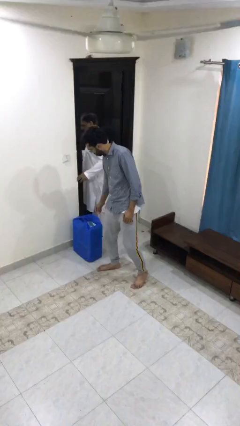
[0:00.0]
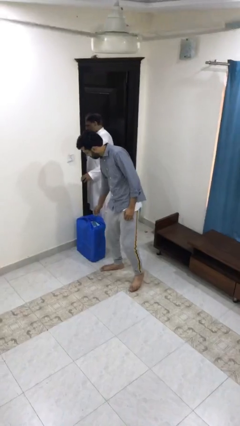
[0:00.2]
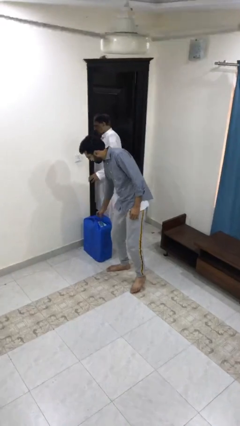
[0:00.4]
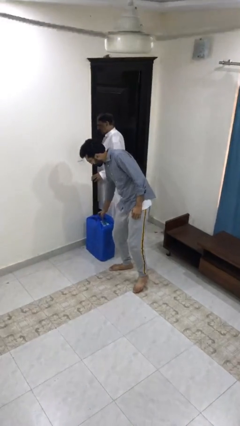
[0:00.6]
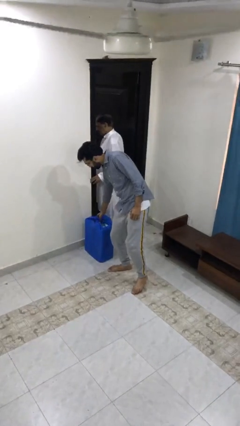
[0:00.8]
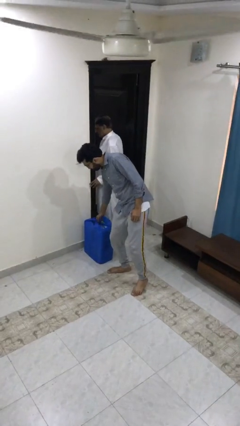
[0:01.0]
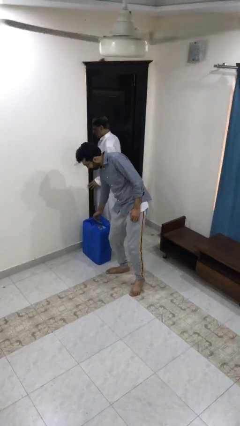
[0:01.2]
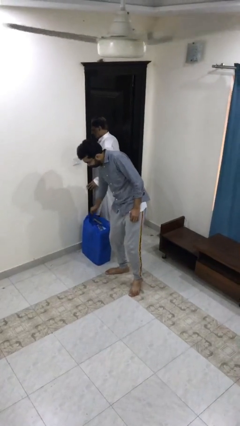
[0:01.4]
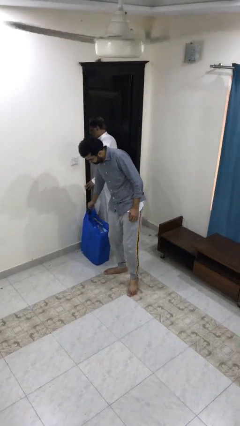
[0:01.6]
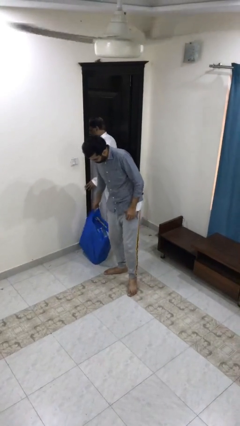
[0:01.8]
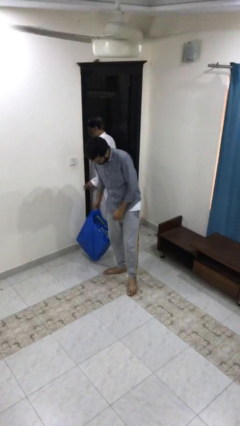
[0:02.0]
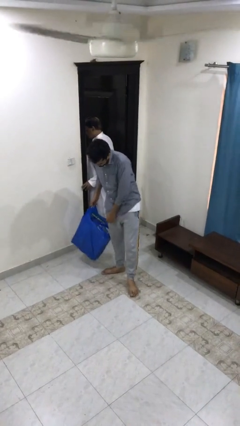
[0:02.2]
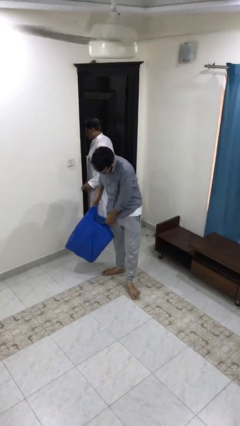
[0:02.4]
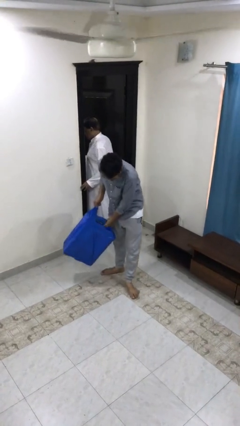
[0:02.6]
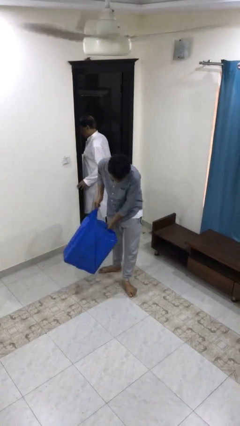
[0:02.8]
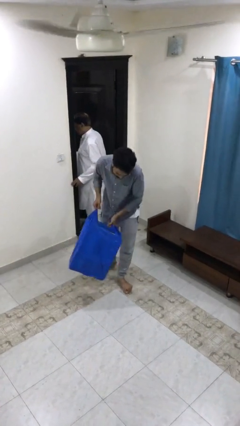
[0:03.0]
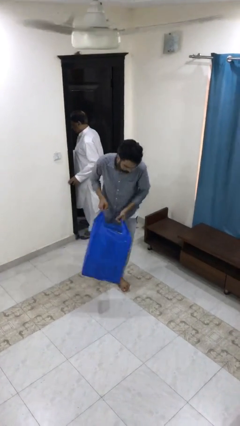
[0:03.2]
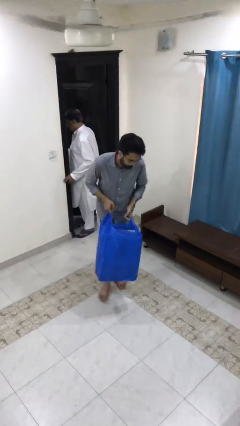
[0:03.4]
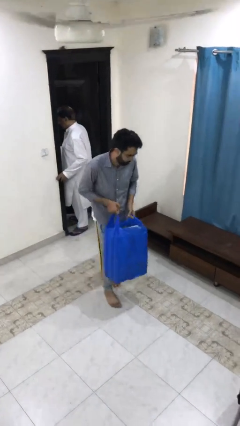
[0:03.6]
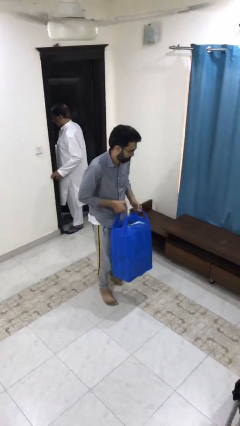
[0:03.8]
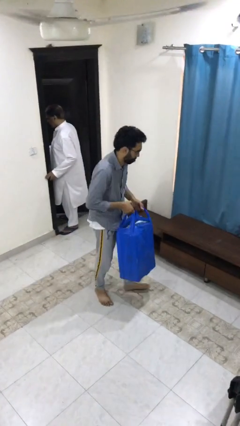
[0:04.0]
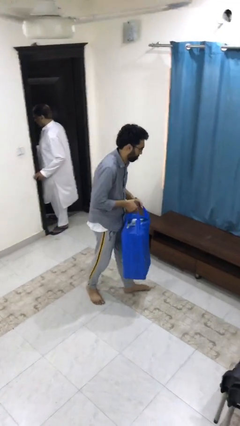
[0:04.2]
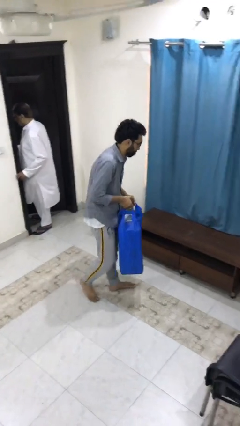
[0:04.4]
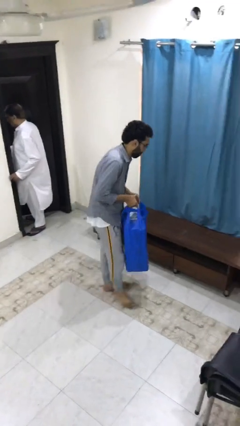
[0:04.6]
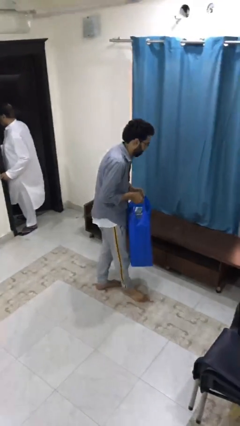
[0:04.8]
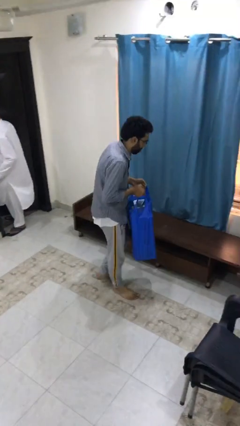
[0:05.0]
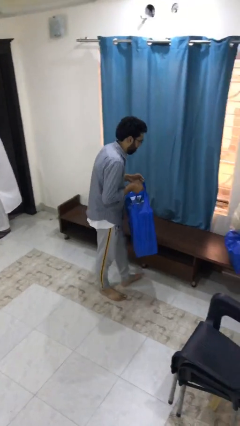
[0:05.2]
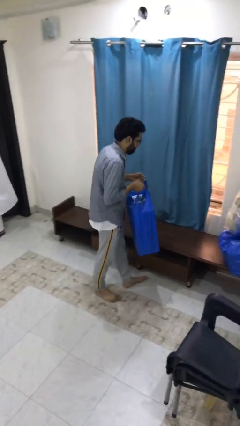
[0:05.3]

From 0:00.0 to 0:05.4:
person steals object from person

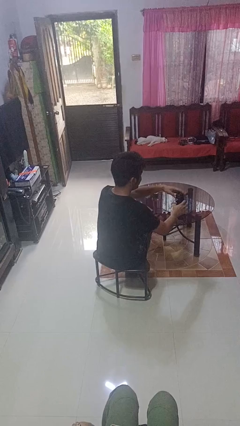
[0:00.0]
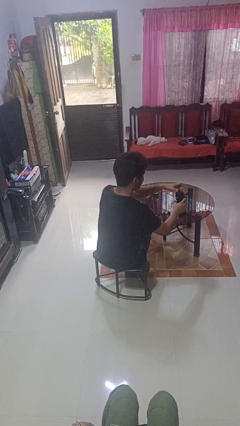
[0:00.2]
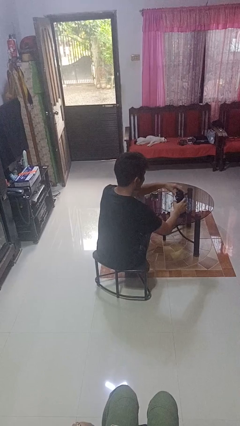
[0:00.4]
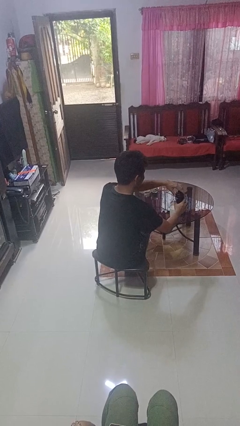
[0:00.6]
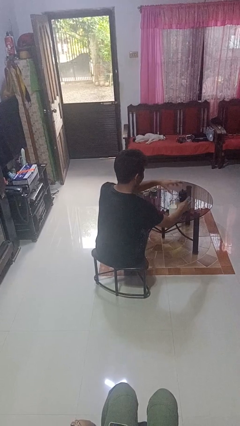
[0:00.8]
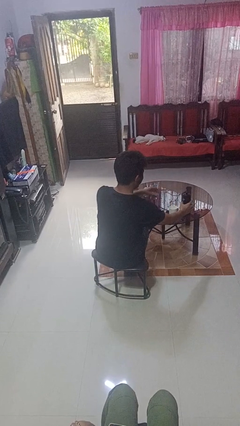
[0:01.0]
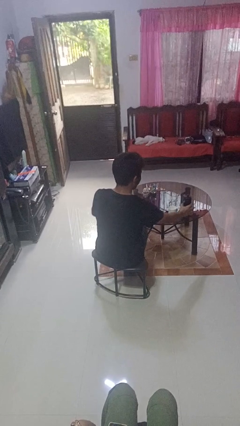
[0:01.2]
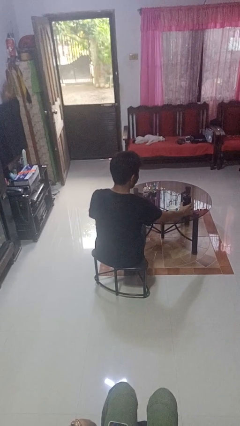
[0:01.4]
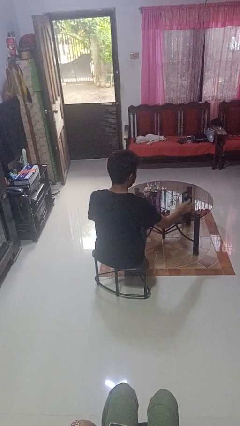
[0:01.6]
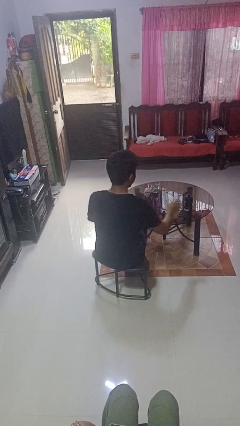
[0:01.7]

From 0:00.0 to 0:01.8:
person screws lid to bottle

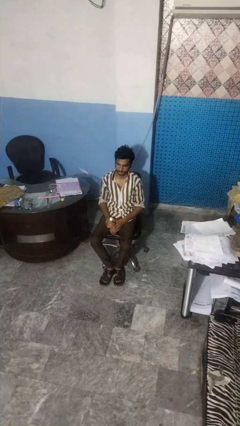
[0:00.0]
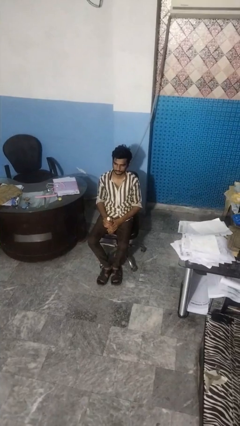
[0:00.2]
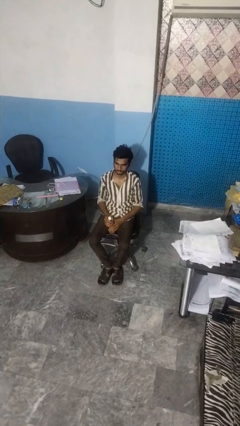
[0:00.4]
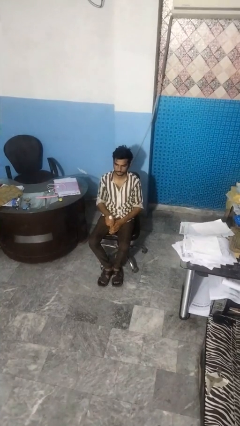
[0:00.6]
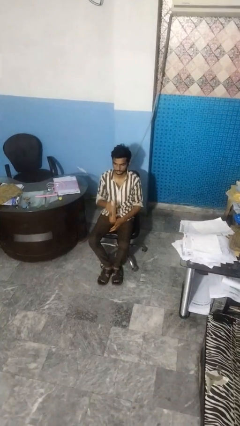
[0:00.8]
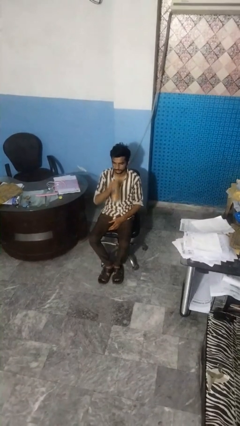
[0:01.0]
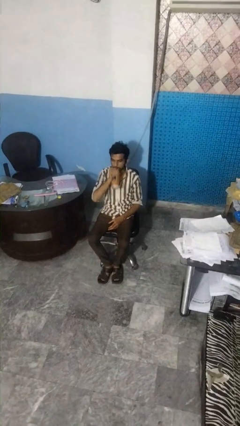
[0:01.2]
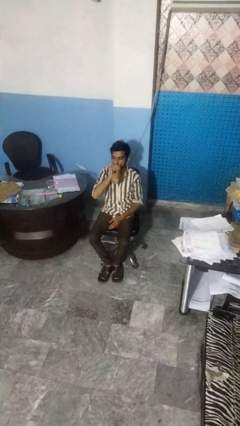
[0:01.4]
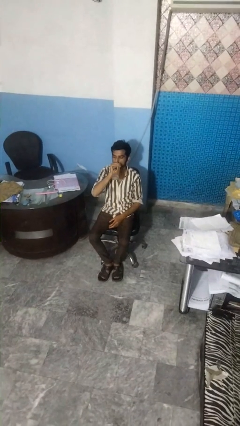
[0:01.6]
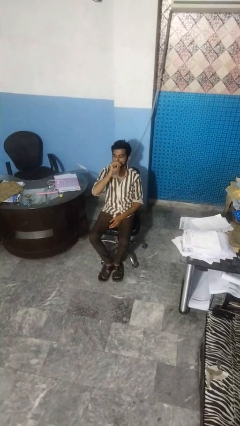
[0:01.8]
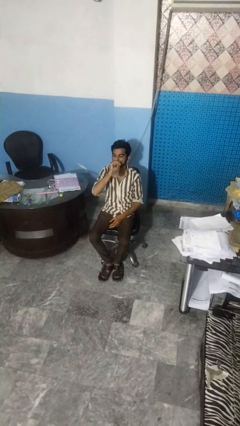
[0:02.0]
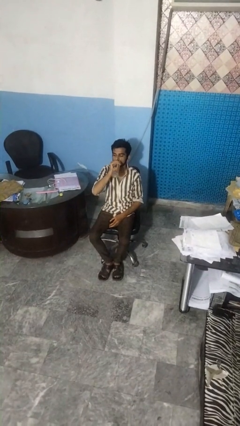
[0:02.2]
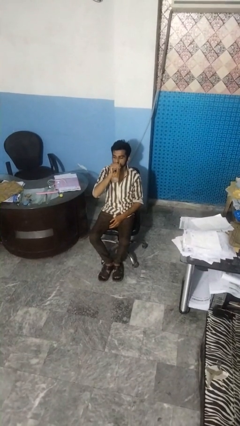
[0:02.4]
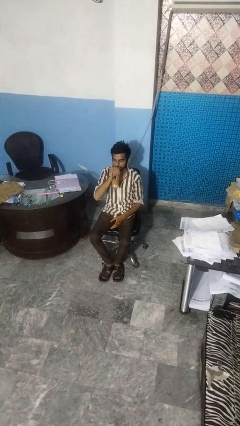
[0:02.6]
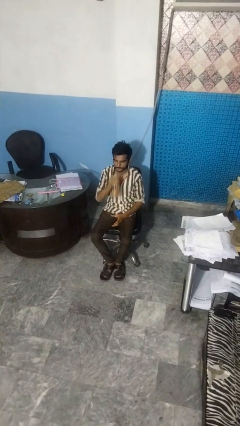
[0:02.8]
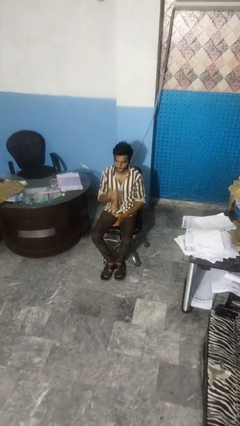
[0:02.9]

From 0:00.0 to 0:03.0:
person drinks from bottle

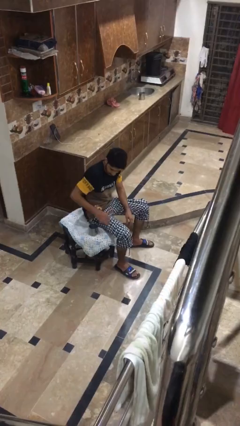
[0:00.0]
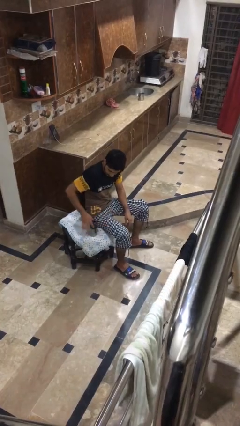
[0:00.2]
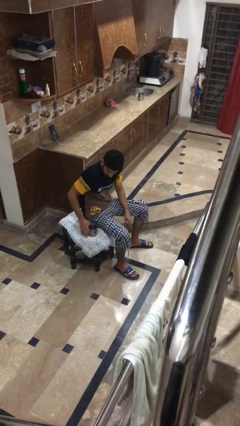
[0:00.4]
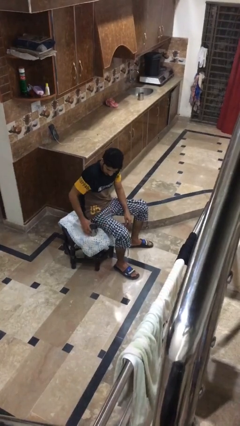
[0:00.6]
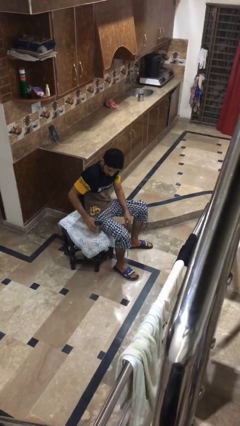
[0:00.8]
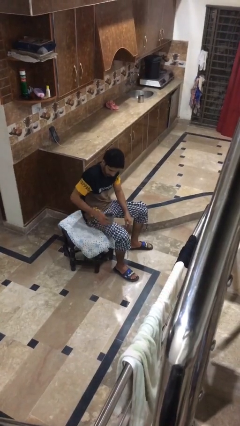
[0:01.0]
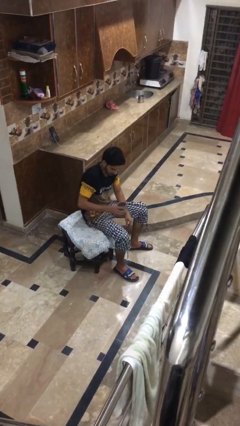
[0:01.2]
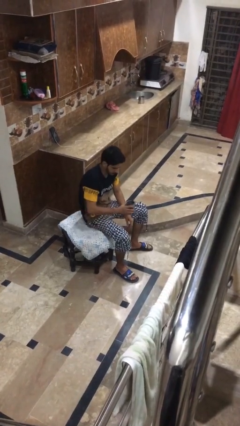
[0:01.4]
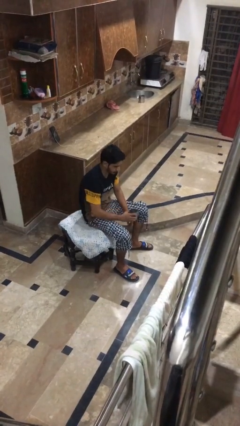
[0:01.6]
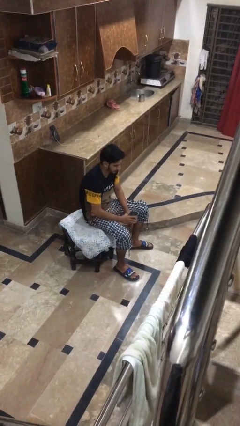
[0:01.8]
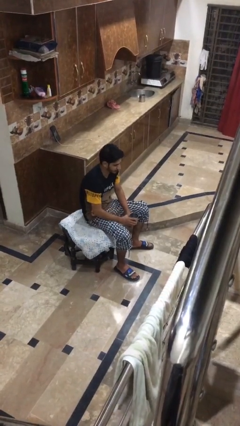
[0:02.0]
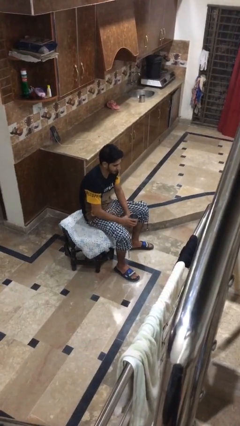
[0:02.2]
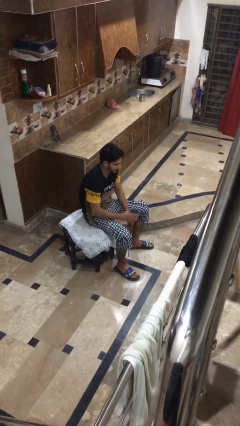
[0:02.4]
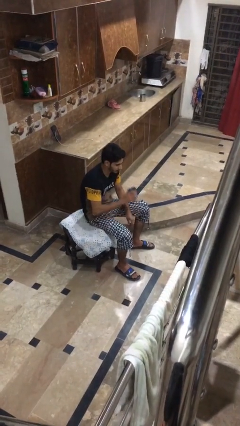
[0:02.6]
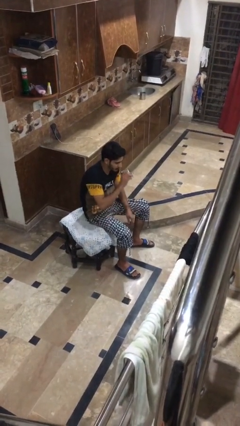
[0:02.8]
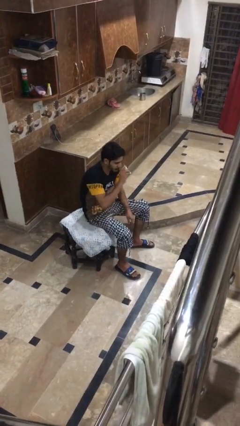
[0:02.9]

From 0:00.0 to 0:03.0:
person picks up object from table

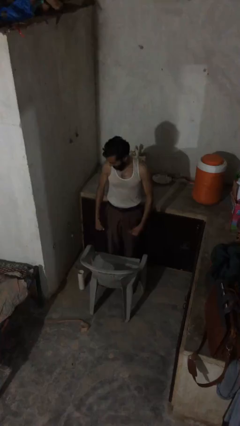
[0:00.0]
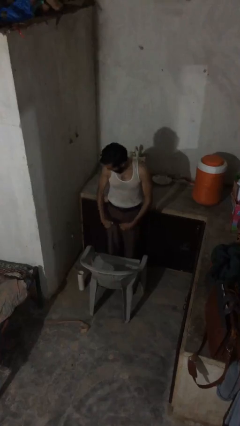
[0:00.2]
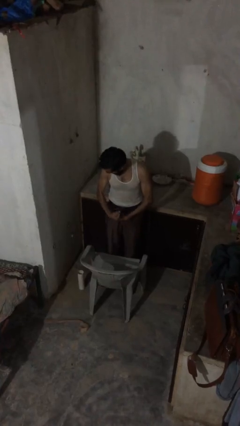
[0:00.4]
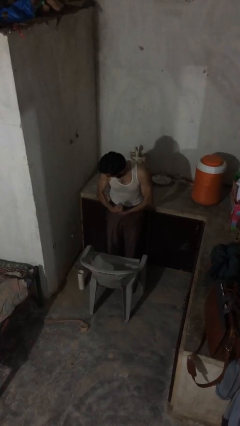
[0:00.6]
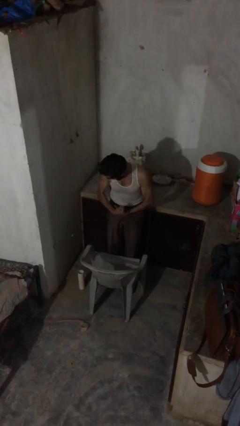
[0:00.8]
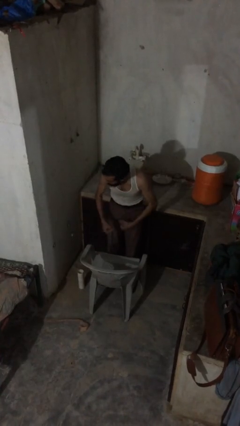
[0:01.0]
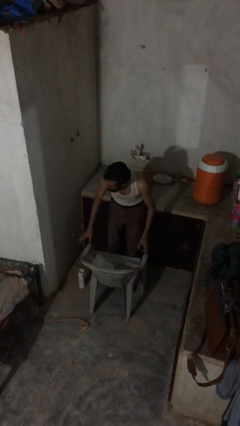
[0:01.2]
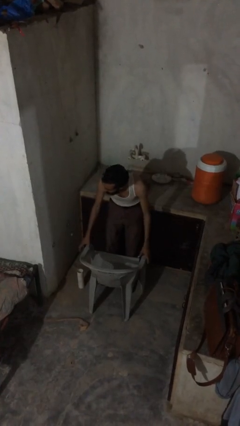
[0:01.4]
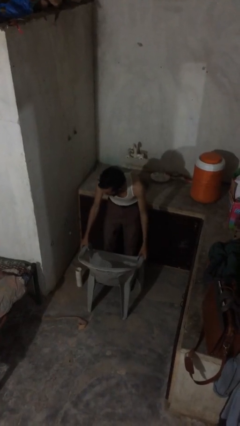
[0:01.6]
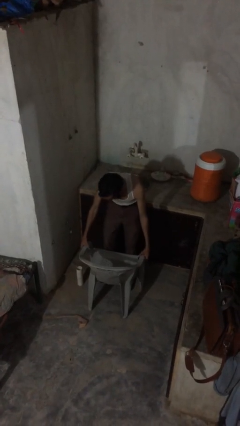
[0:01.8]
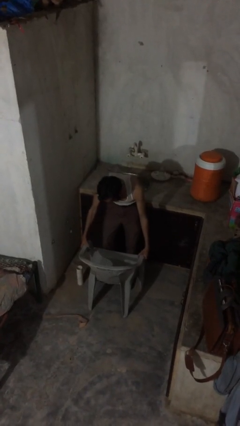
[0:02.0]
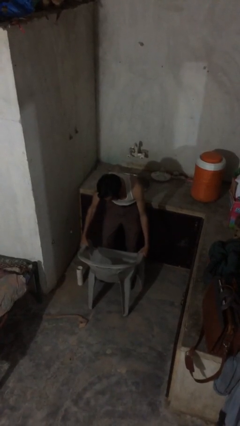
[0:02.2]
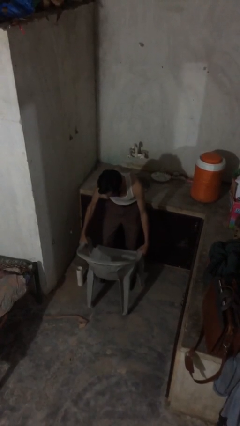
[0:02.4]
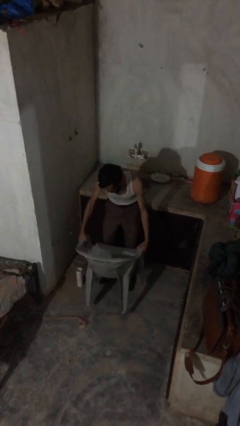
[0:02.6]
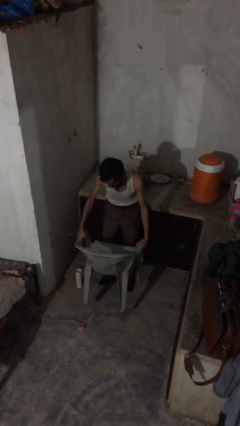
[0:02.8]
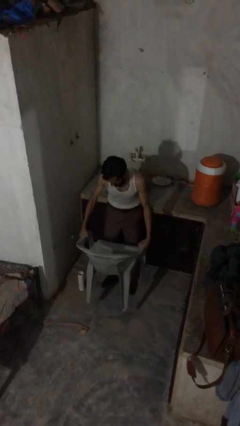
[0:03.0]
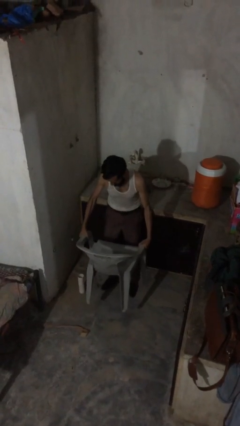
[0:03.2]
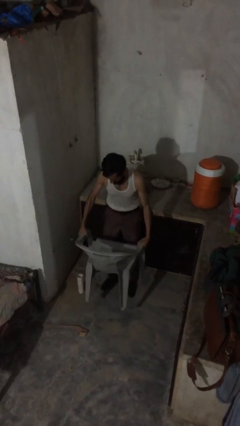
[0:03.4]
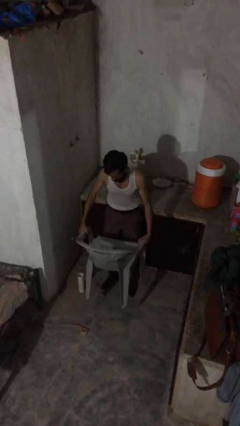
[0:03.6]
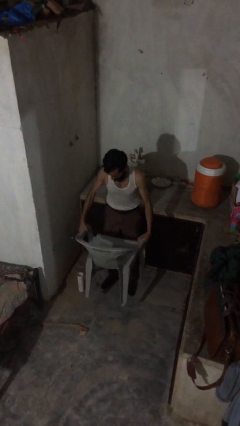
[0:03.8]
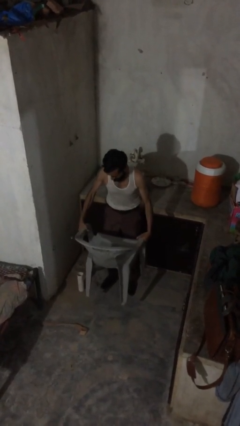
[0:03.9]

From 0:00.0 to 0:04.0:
person picks up object from floor

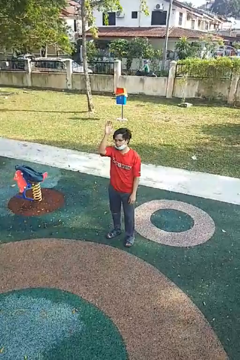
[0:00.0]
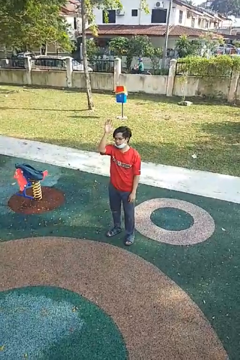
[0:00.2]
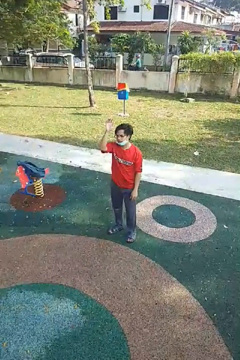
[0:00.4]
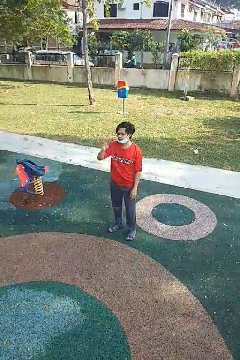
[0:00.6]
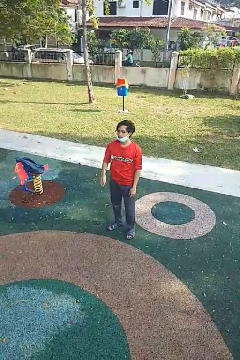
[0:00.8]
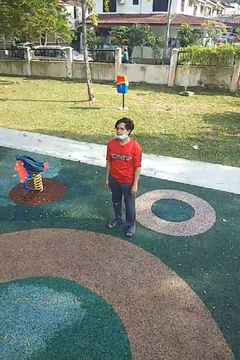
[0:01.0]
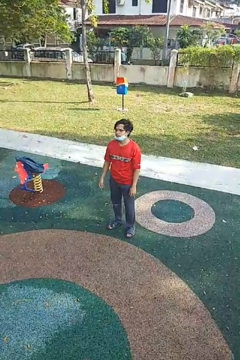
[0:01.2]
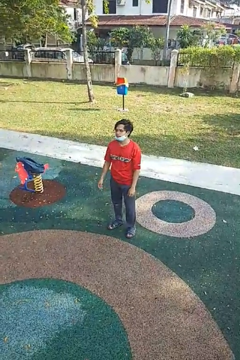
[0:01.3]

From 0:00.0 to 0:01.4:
person gestures lower hand
